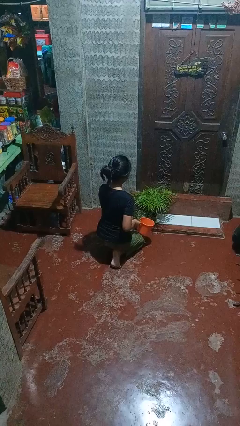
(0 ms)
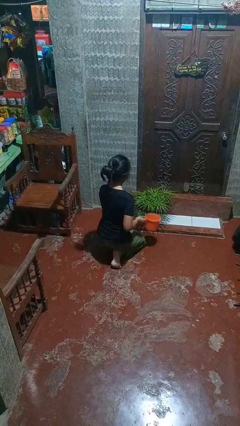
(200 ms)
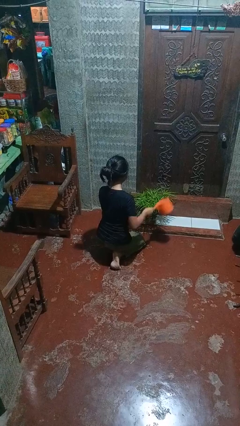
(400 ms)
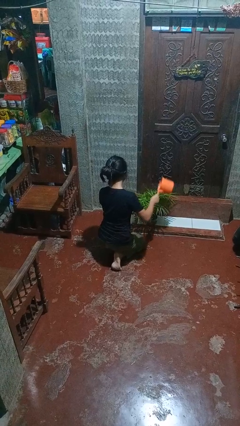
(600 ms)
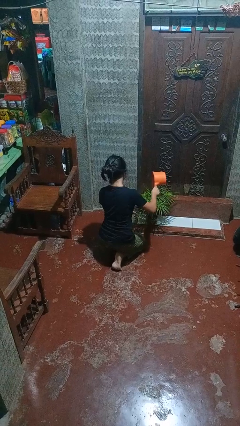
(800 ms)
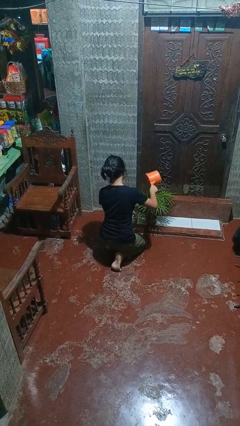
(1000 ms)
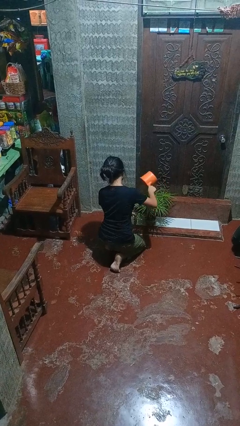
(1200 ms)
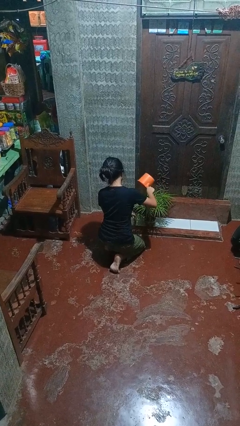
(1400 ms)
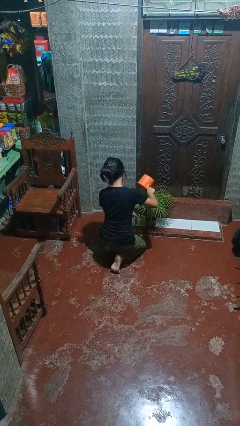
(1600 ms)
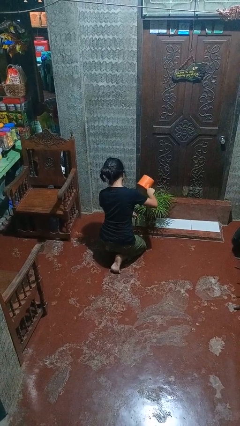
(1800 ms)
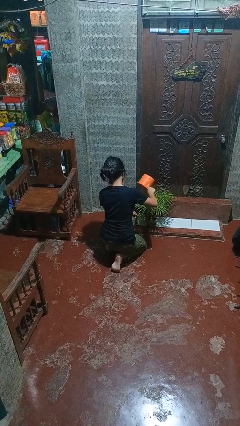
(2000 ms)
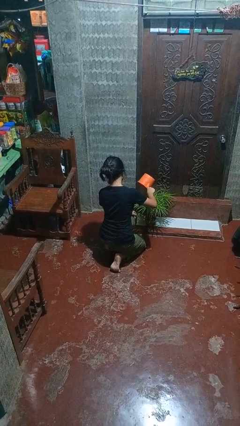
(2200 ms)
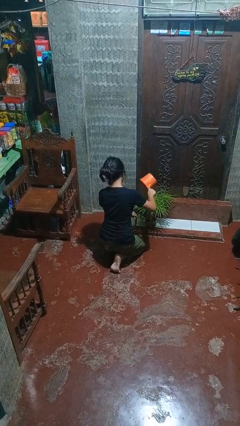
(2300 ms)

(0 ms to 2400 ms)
person waters houseplant

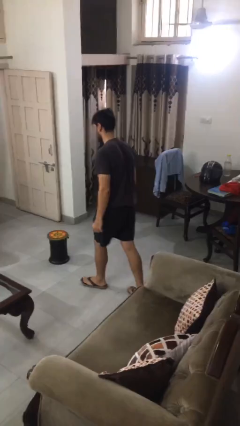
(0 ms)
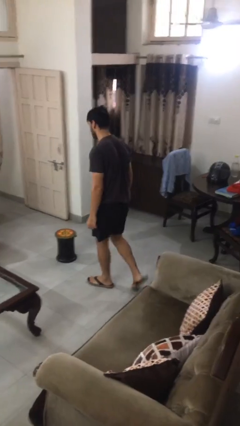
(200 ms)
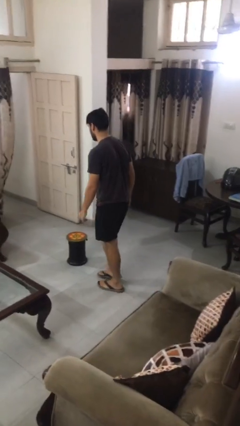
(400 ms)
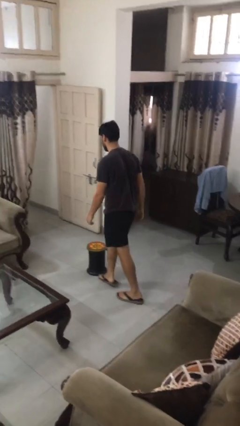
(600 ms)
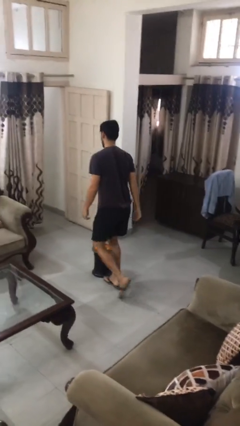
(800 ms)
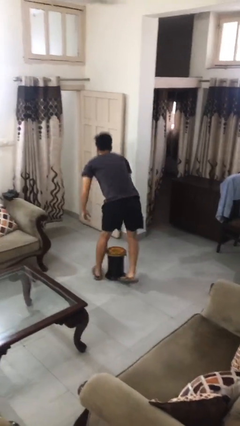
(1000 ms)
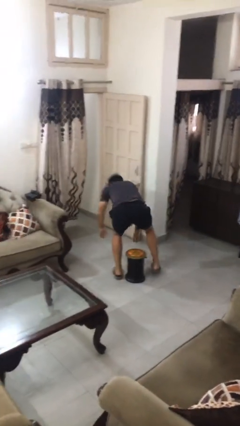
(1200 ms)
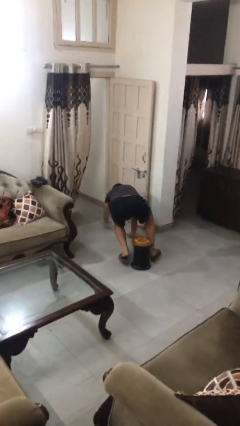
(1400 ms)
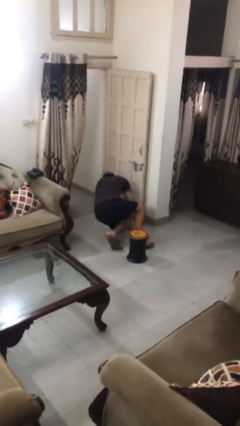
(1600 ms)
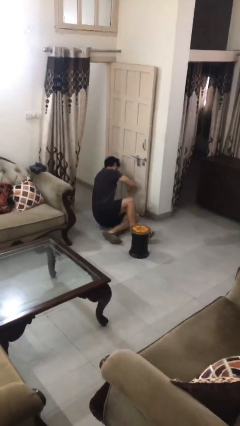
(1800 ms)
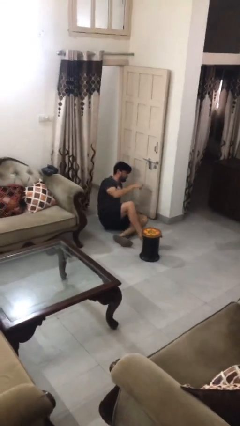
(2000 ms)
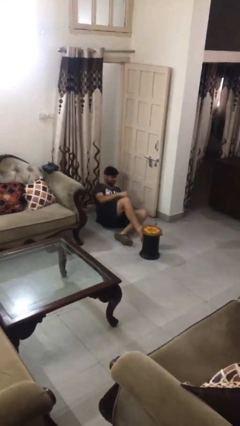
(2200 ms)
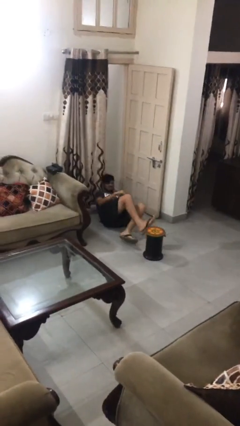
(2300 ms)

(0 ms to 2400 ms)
person trips on object on floor

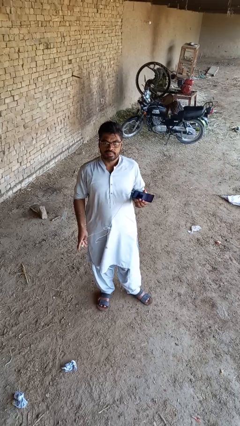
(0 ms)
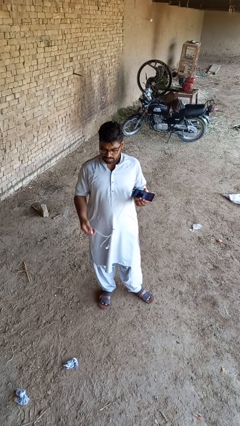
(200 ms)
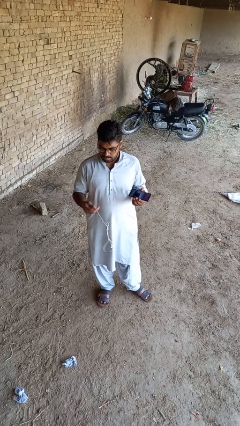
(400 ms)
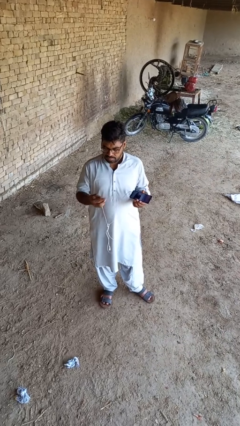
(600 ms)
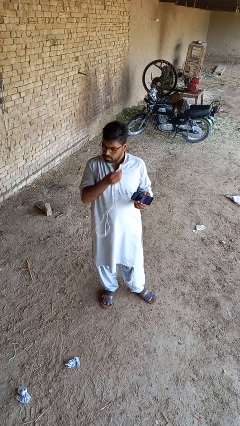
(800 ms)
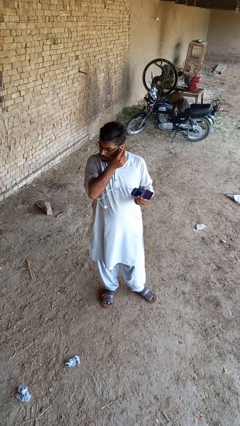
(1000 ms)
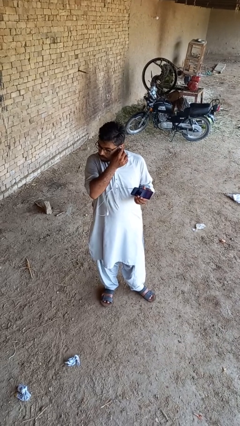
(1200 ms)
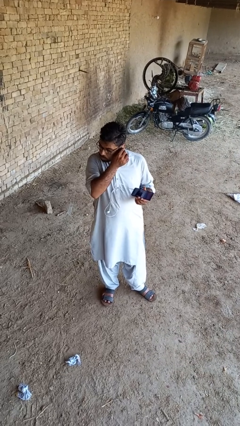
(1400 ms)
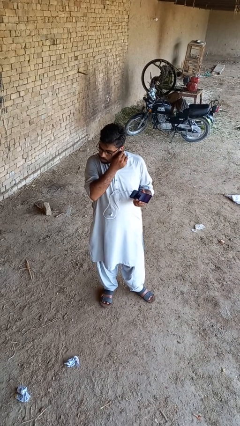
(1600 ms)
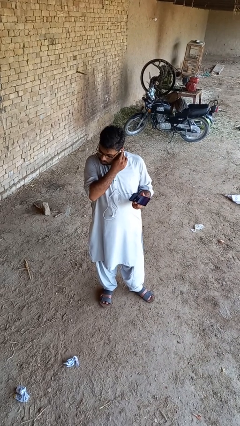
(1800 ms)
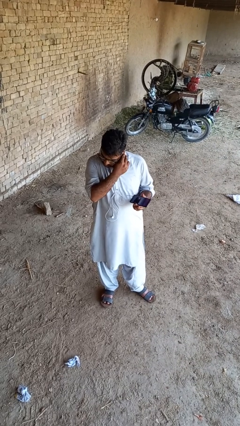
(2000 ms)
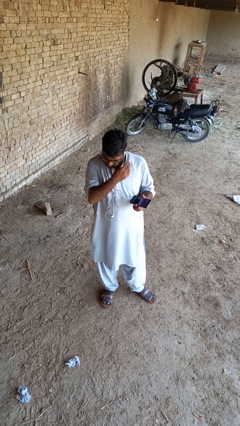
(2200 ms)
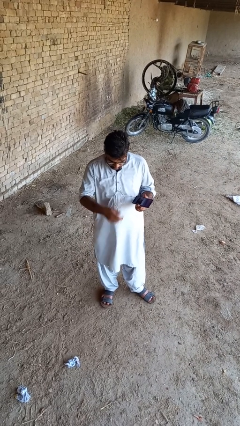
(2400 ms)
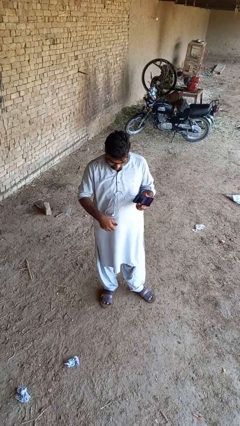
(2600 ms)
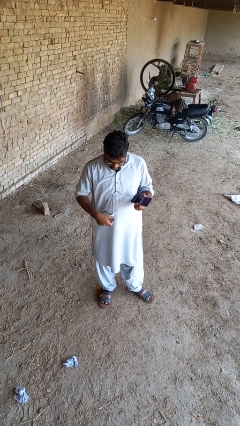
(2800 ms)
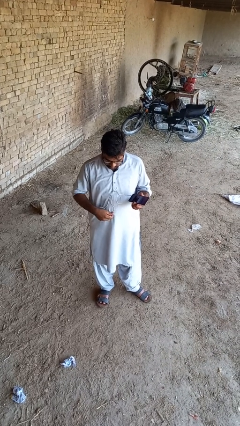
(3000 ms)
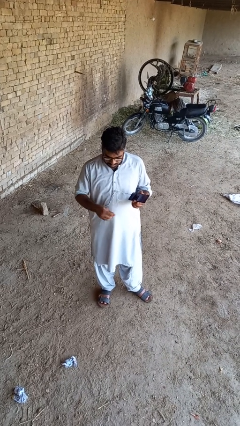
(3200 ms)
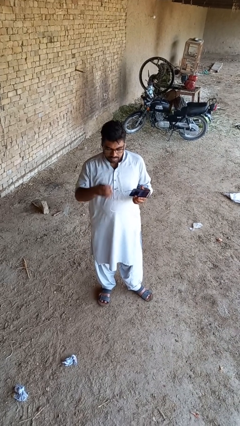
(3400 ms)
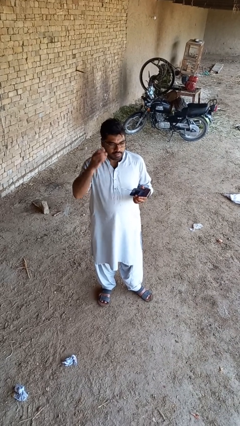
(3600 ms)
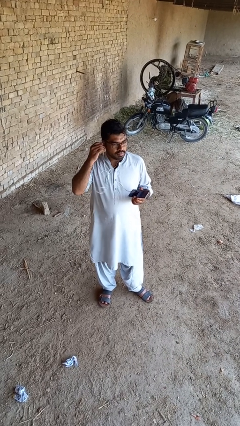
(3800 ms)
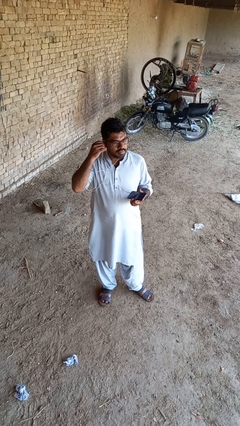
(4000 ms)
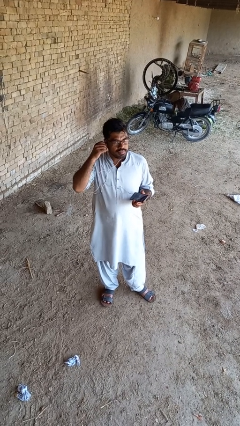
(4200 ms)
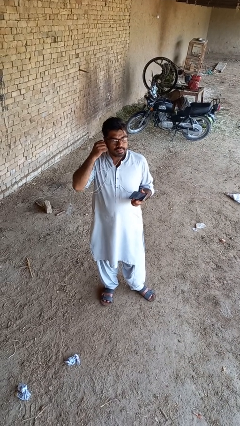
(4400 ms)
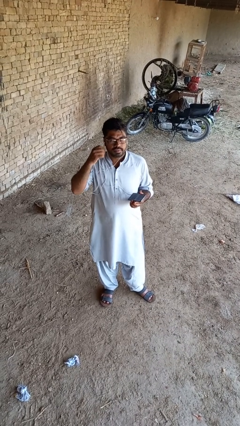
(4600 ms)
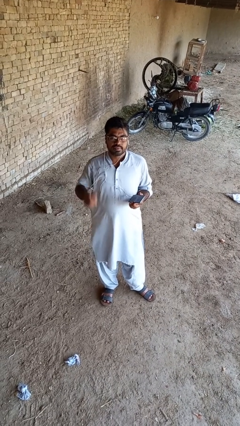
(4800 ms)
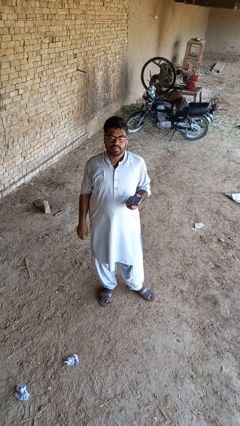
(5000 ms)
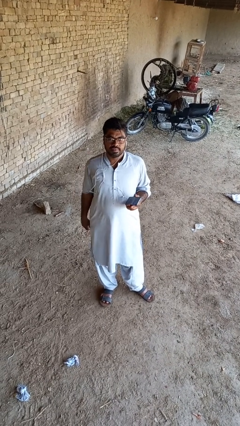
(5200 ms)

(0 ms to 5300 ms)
person puts on headphones

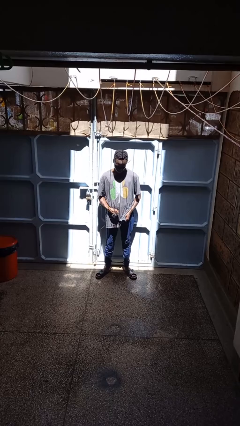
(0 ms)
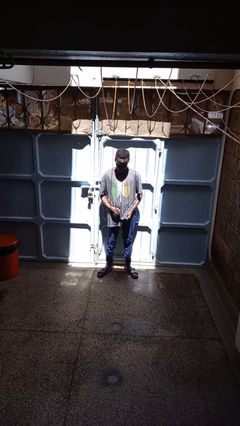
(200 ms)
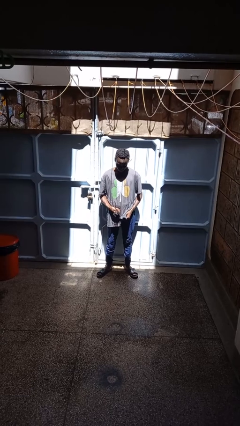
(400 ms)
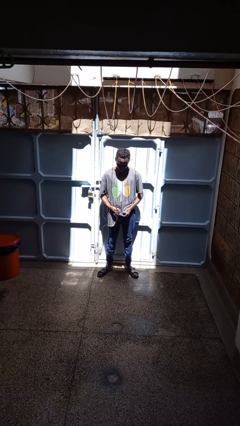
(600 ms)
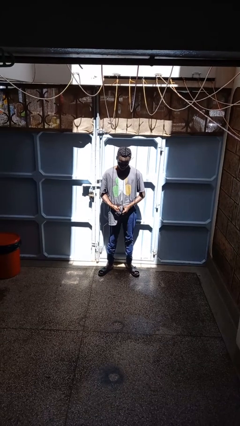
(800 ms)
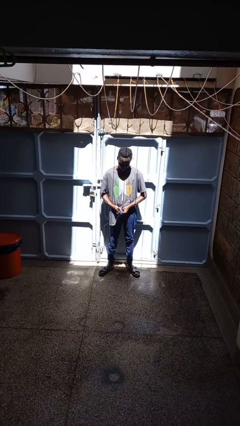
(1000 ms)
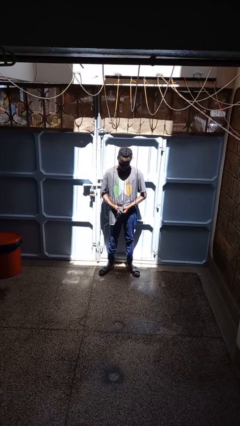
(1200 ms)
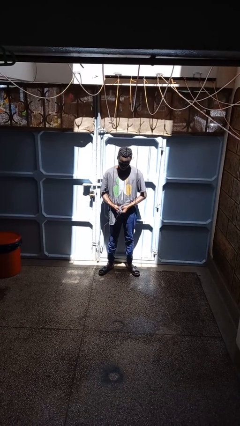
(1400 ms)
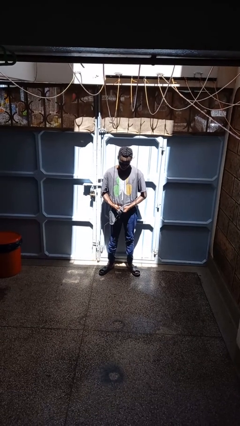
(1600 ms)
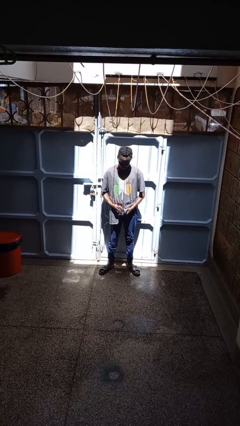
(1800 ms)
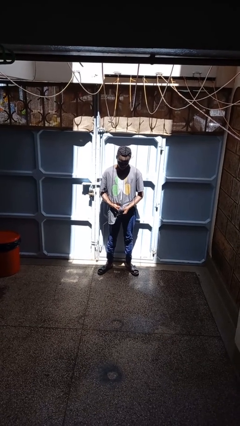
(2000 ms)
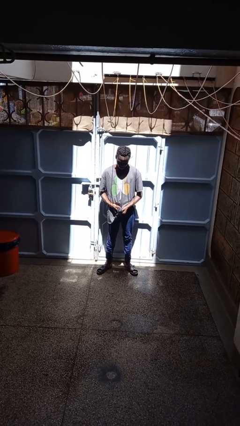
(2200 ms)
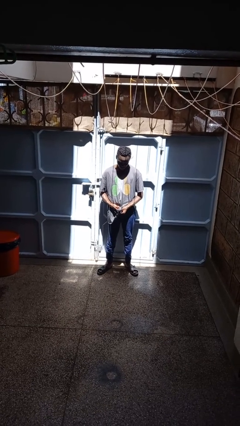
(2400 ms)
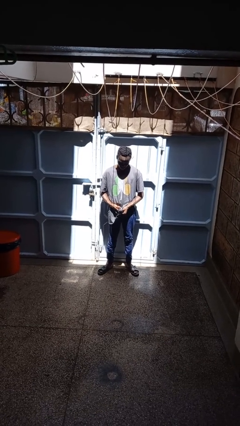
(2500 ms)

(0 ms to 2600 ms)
person cleans eyeglasses

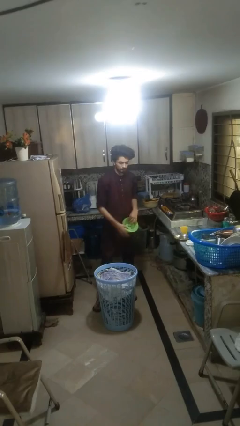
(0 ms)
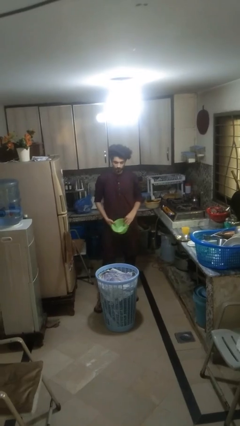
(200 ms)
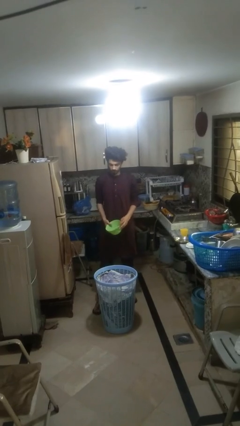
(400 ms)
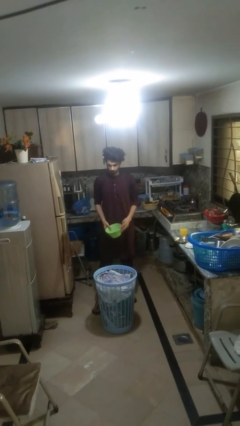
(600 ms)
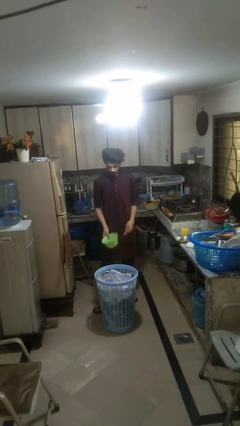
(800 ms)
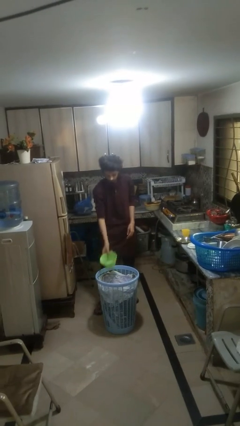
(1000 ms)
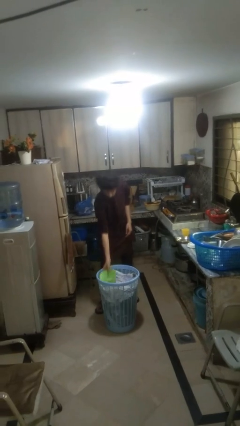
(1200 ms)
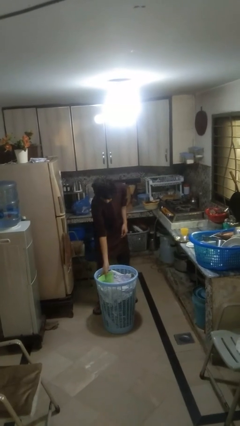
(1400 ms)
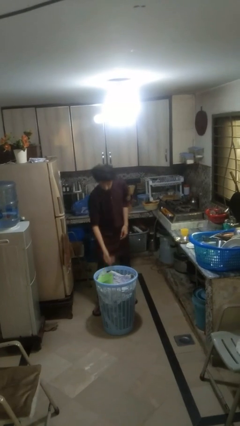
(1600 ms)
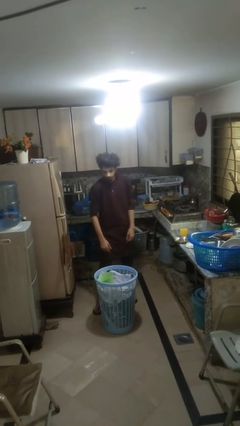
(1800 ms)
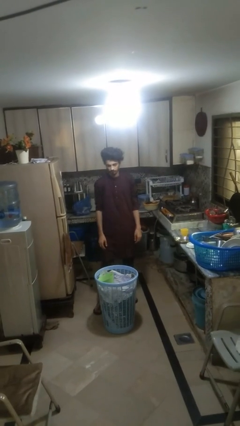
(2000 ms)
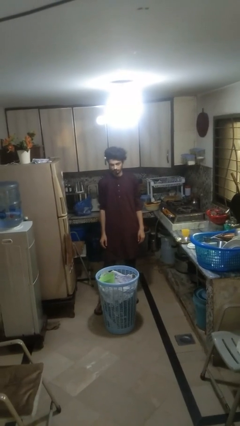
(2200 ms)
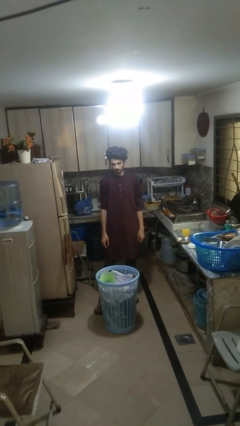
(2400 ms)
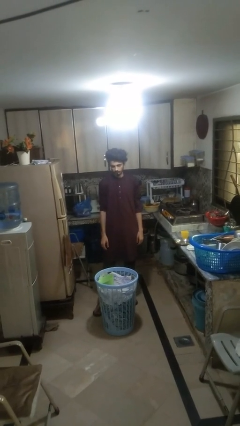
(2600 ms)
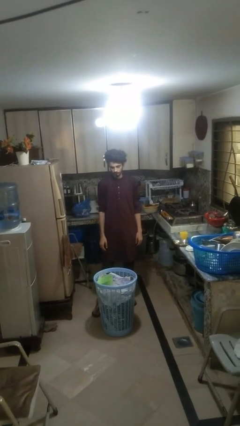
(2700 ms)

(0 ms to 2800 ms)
person puts object into basket

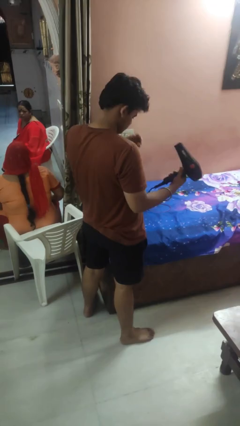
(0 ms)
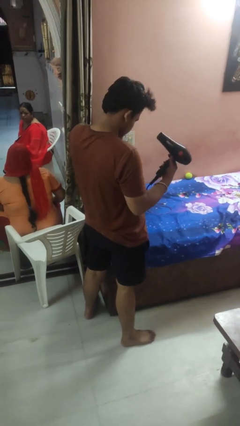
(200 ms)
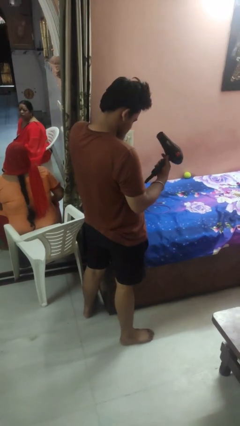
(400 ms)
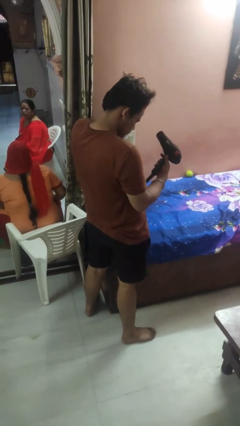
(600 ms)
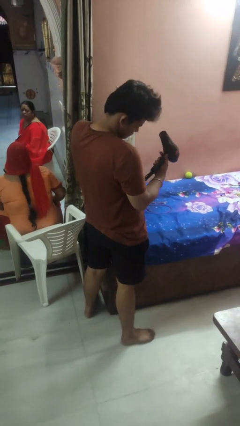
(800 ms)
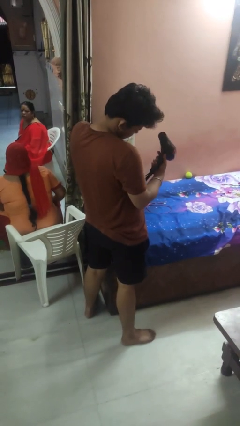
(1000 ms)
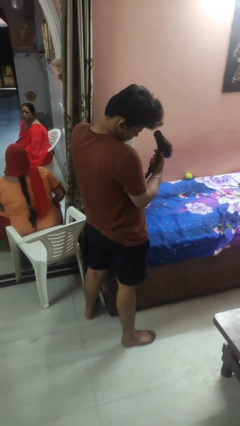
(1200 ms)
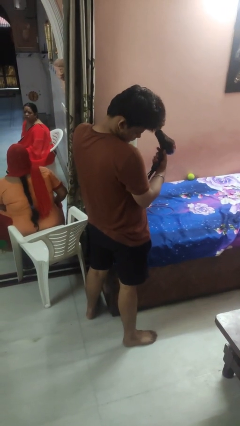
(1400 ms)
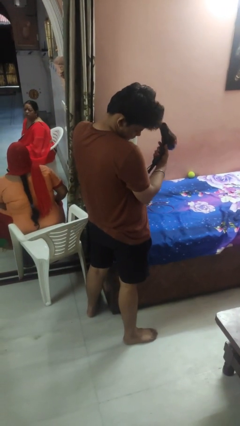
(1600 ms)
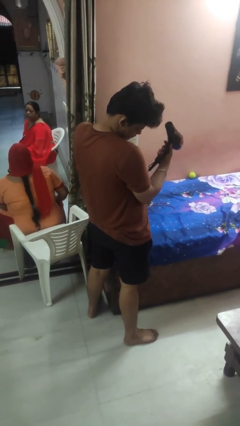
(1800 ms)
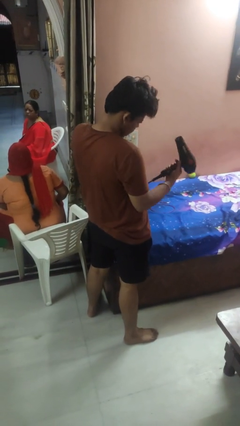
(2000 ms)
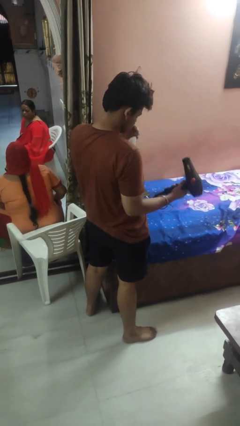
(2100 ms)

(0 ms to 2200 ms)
person dries hair with hairdryer
